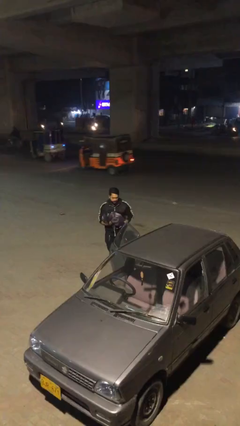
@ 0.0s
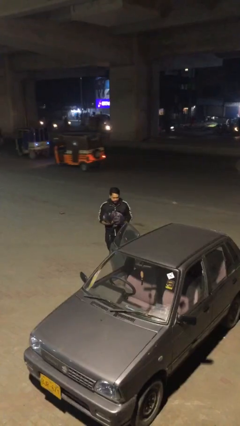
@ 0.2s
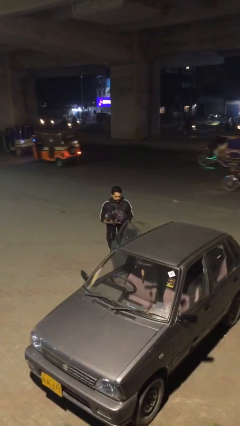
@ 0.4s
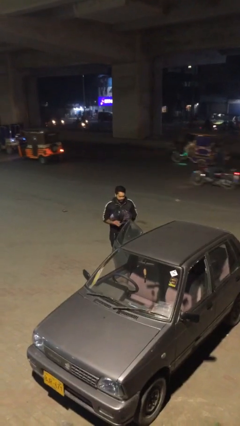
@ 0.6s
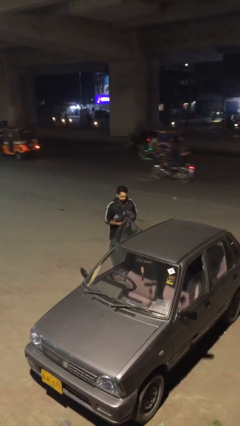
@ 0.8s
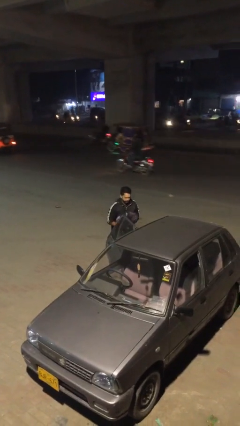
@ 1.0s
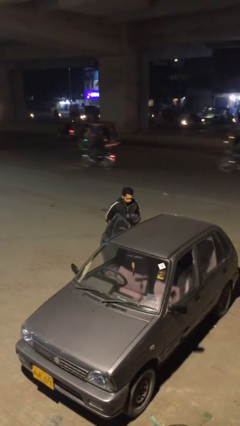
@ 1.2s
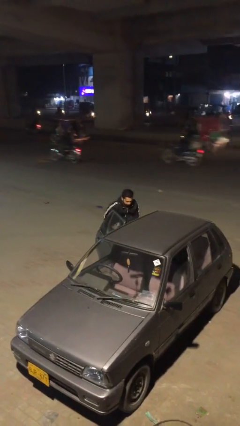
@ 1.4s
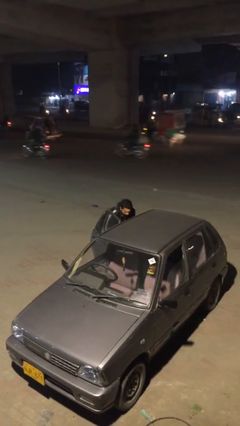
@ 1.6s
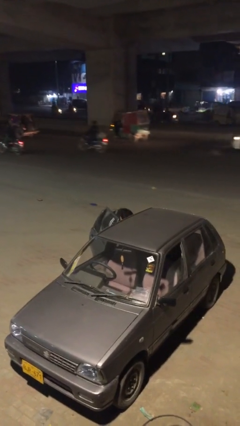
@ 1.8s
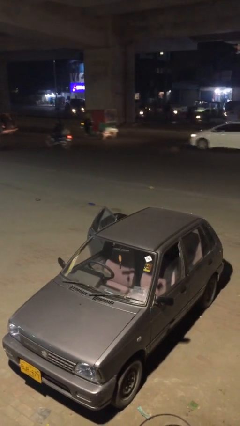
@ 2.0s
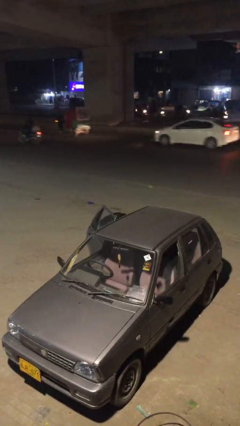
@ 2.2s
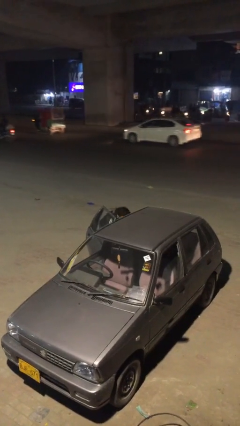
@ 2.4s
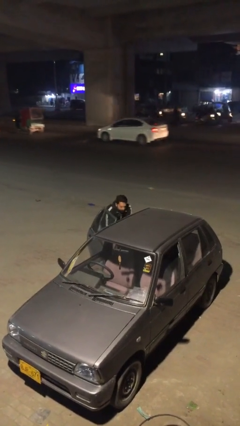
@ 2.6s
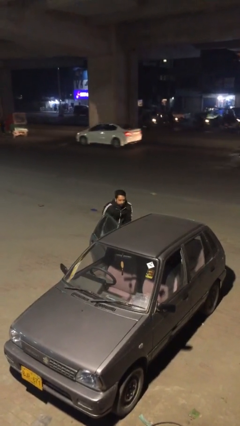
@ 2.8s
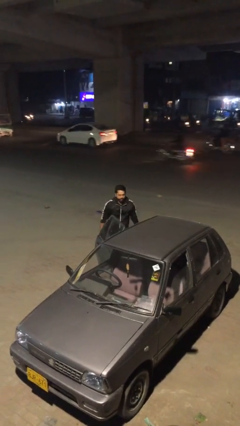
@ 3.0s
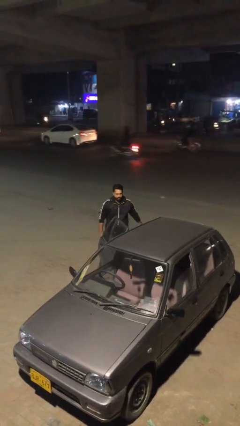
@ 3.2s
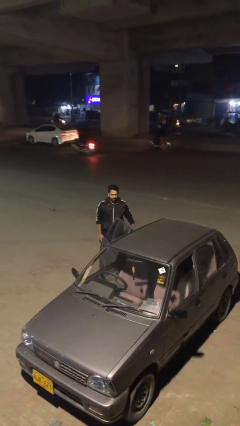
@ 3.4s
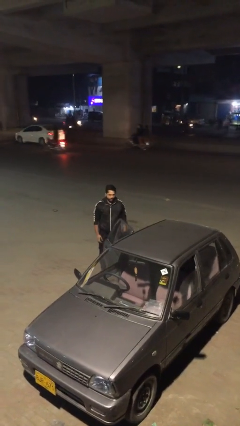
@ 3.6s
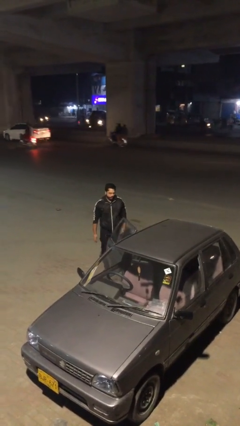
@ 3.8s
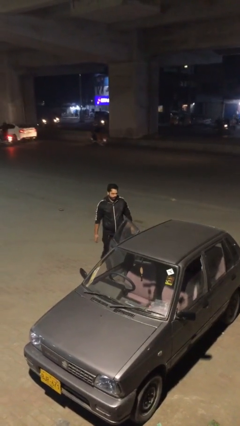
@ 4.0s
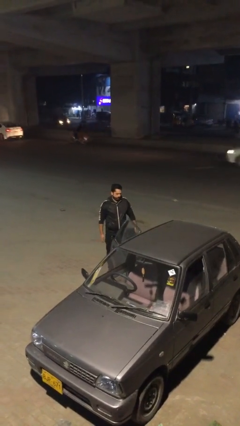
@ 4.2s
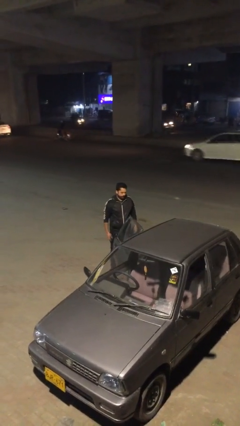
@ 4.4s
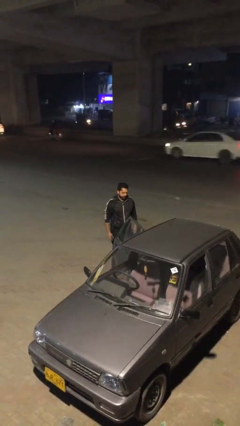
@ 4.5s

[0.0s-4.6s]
person loads car

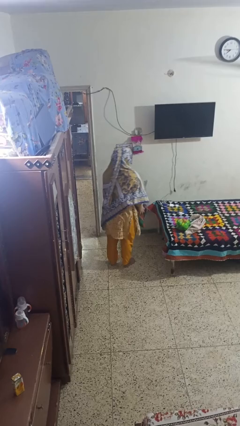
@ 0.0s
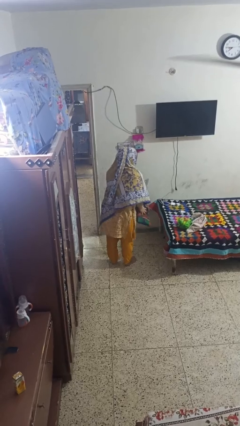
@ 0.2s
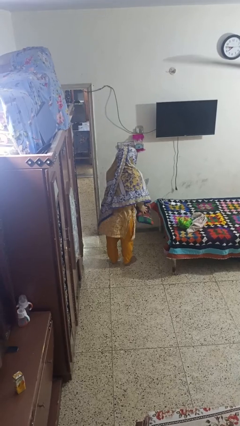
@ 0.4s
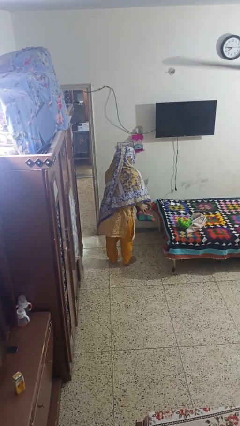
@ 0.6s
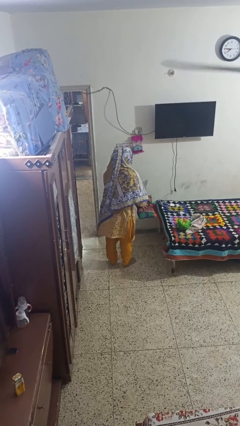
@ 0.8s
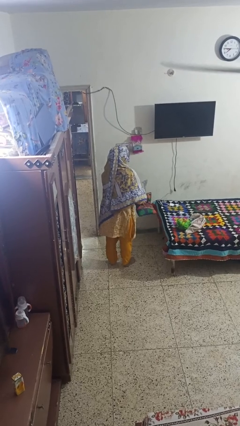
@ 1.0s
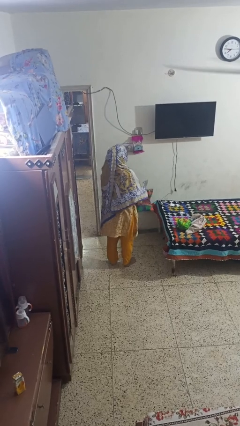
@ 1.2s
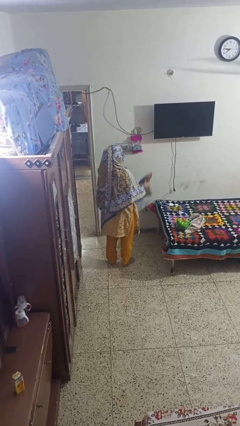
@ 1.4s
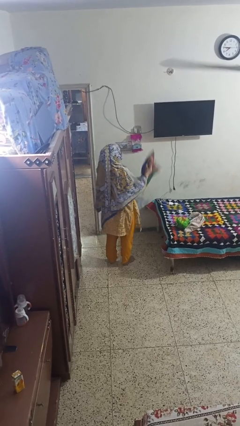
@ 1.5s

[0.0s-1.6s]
person catches dropped object

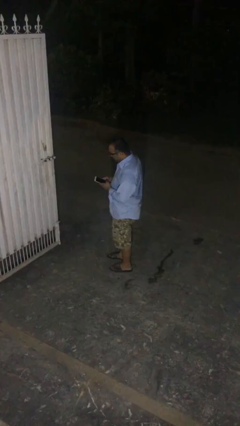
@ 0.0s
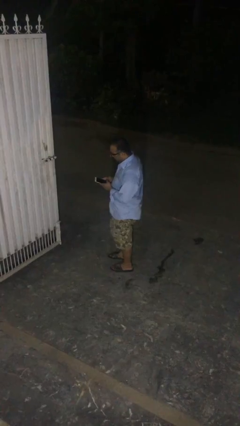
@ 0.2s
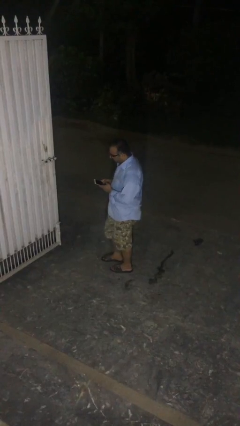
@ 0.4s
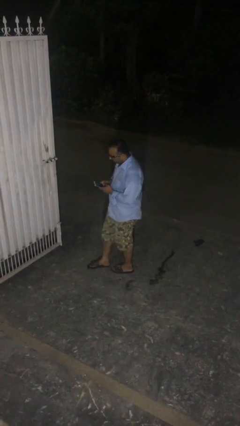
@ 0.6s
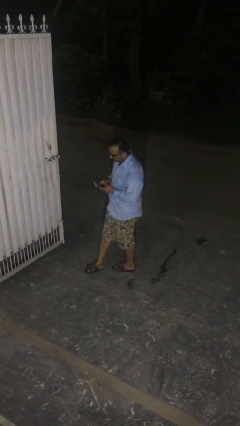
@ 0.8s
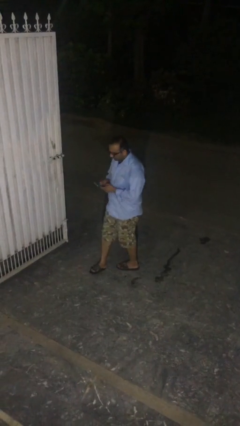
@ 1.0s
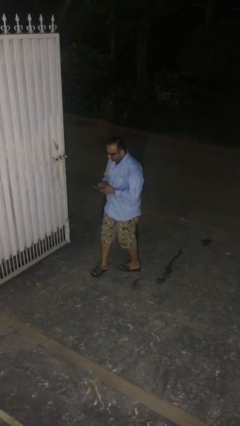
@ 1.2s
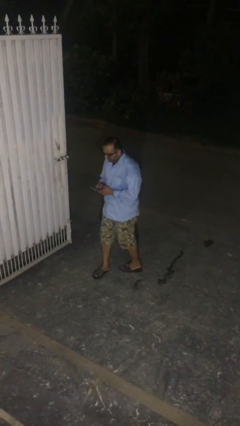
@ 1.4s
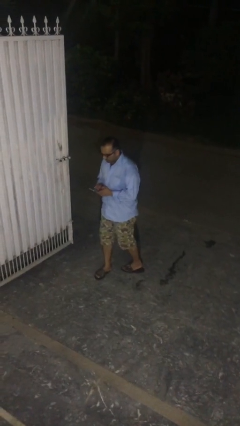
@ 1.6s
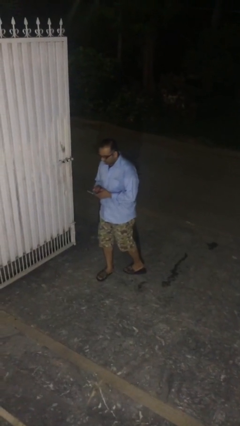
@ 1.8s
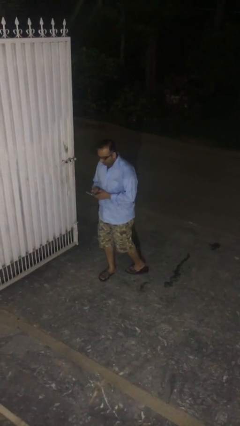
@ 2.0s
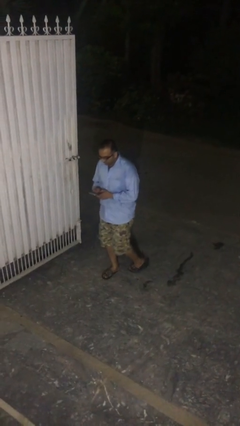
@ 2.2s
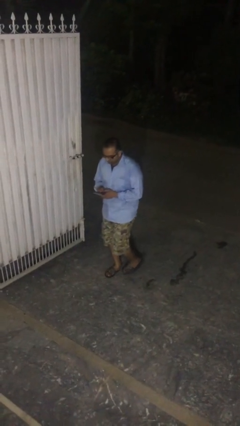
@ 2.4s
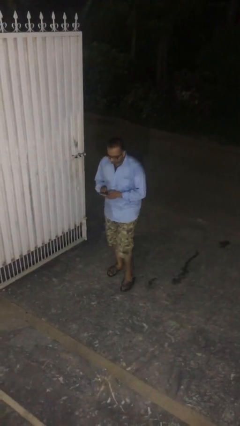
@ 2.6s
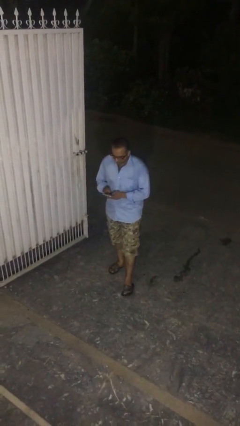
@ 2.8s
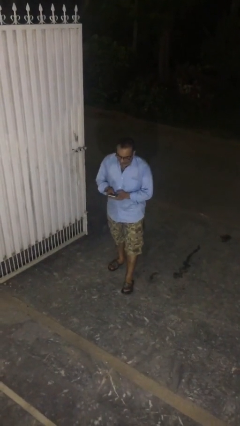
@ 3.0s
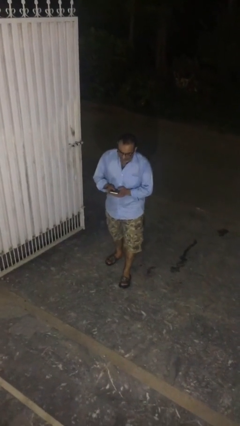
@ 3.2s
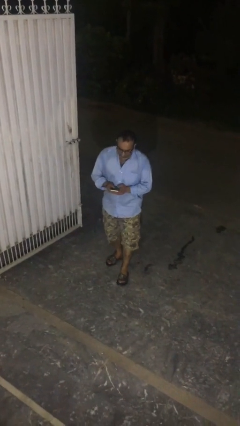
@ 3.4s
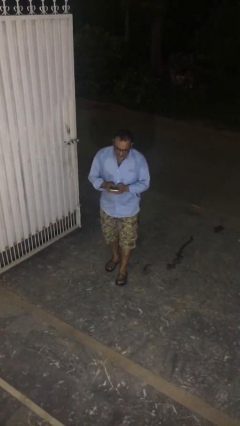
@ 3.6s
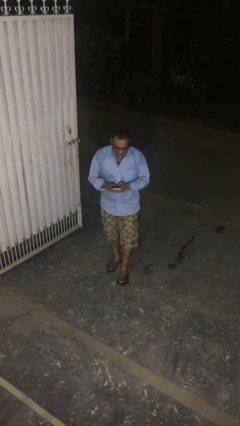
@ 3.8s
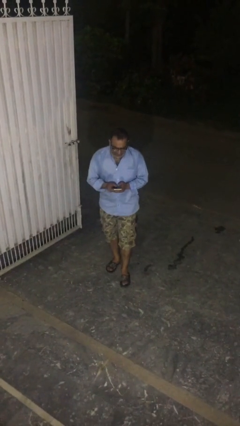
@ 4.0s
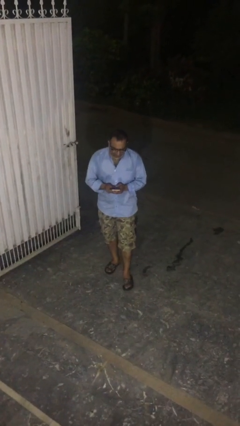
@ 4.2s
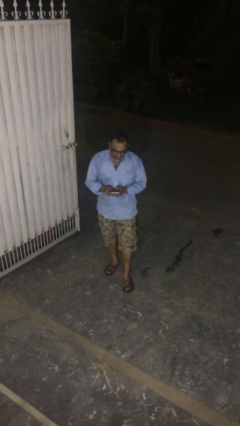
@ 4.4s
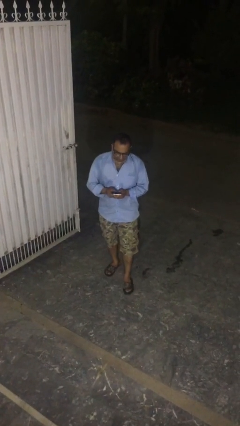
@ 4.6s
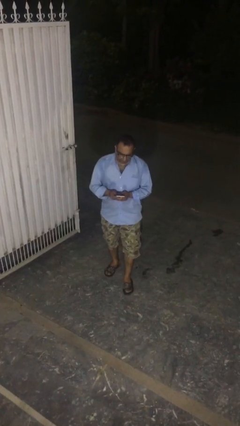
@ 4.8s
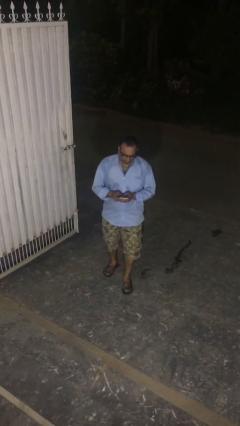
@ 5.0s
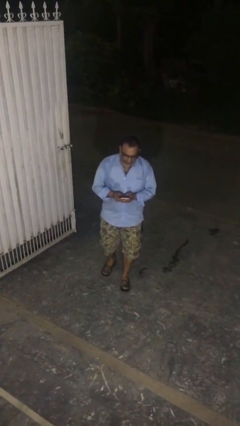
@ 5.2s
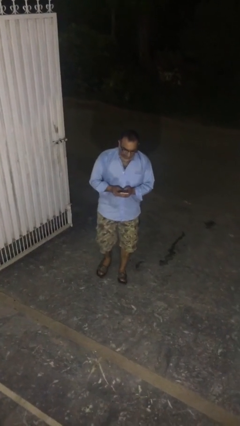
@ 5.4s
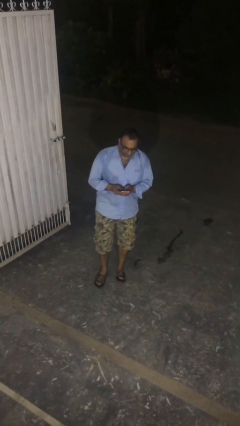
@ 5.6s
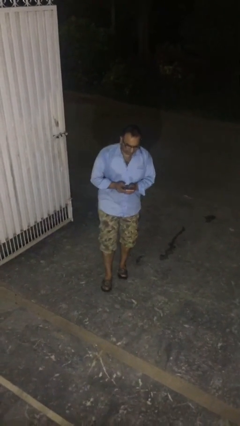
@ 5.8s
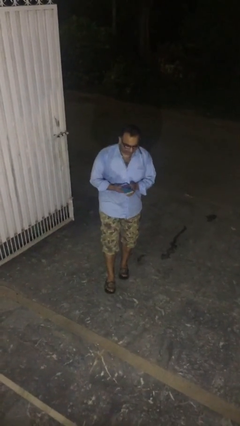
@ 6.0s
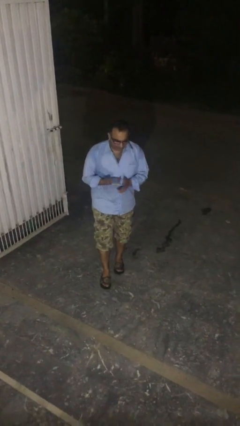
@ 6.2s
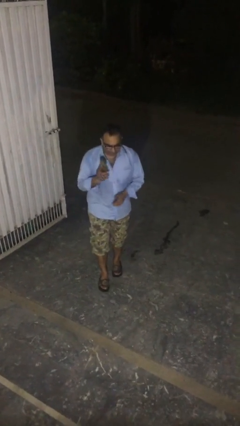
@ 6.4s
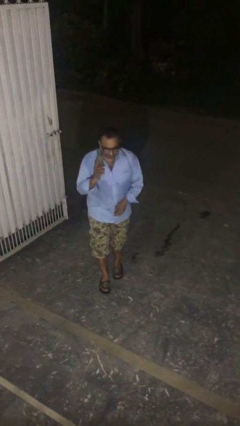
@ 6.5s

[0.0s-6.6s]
person texts on phone

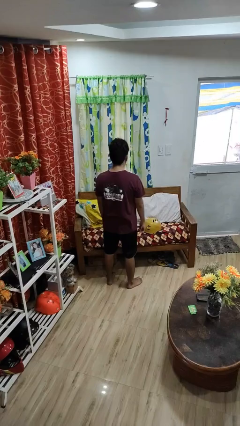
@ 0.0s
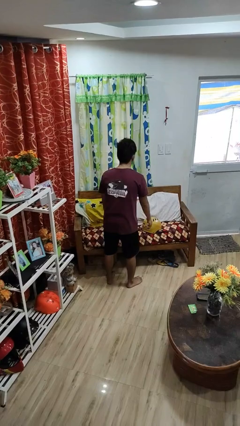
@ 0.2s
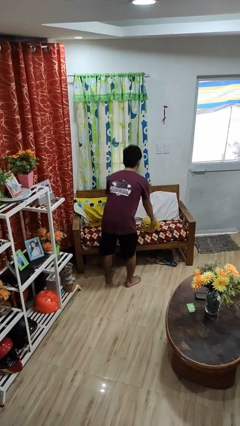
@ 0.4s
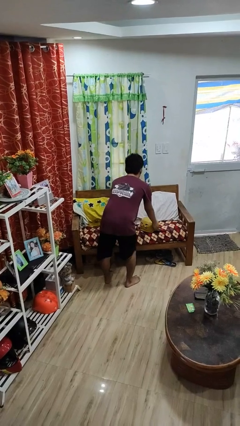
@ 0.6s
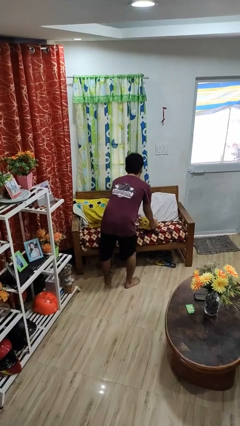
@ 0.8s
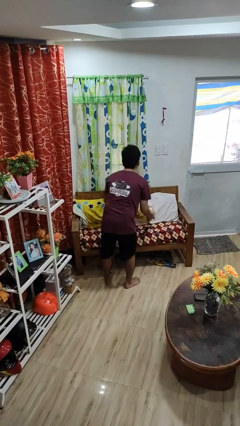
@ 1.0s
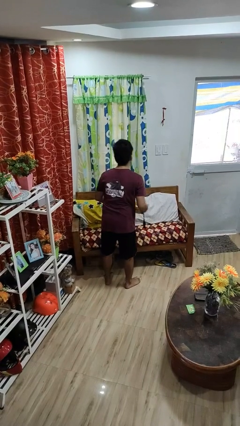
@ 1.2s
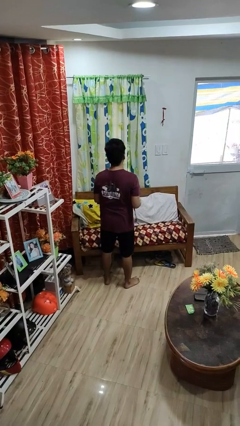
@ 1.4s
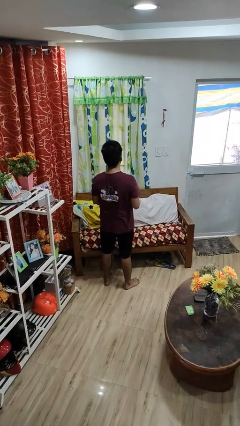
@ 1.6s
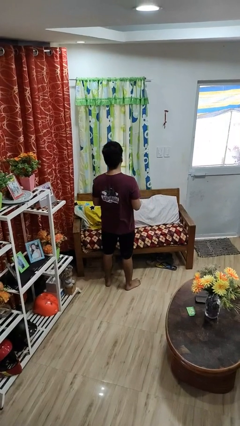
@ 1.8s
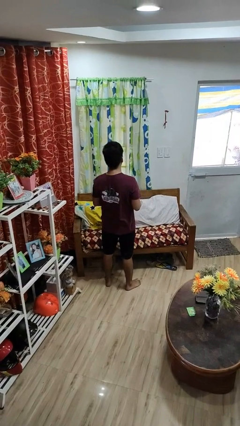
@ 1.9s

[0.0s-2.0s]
person picks up object from couch

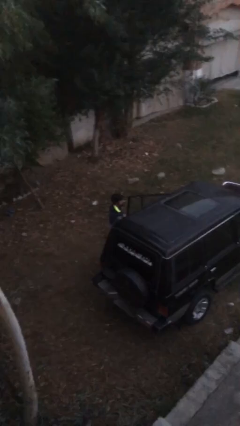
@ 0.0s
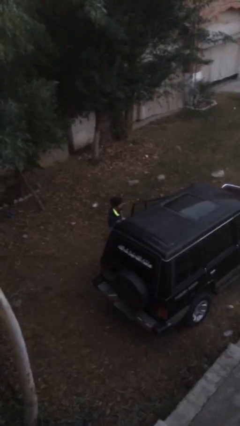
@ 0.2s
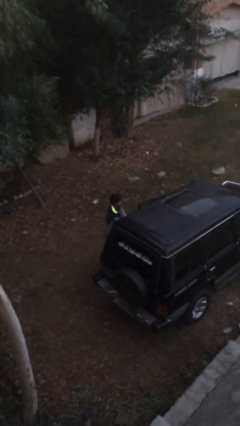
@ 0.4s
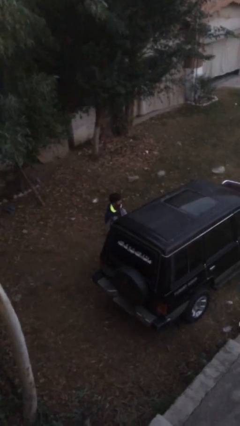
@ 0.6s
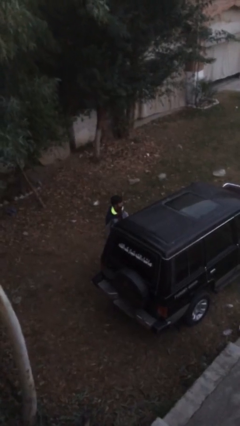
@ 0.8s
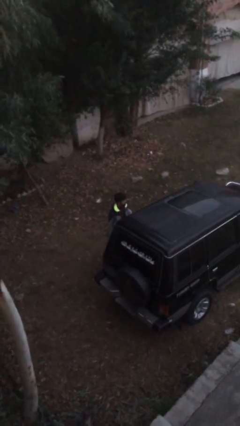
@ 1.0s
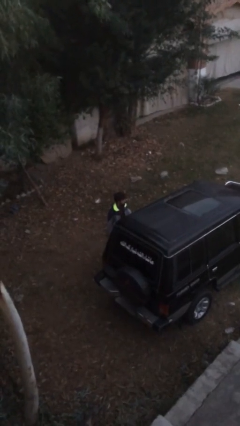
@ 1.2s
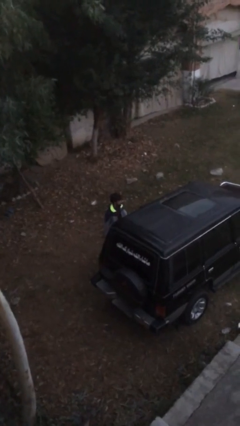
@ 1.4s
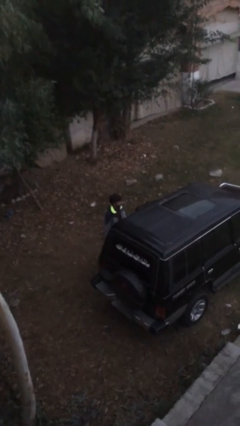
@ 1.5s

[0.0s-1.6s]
person closes car door

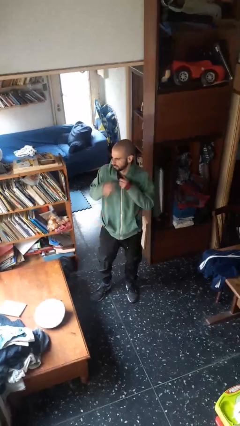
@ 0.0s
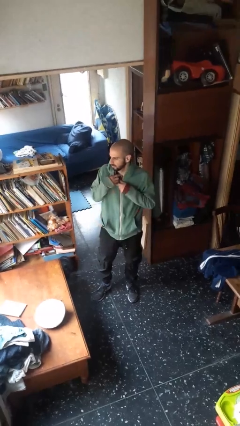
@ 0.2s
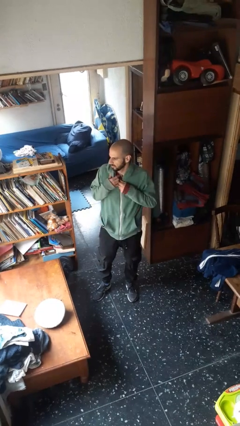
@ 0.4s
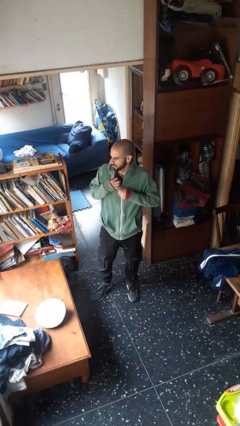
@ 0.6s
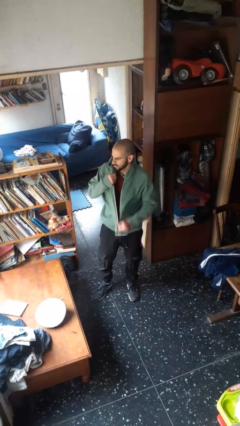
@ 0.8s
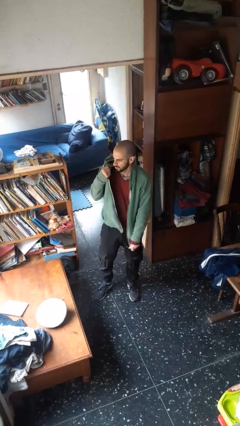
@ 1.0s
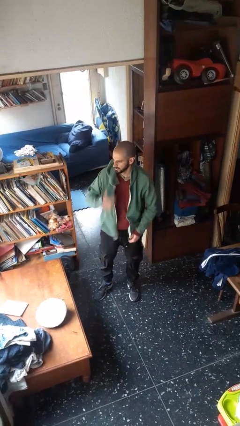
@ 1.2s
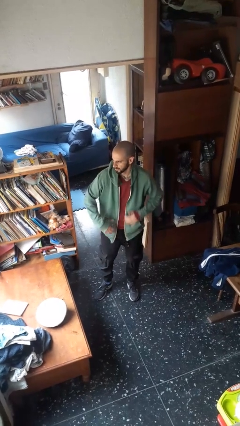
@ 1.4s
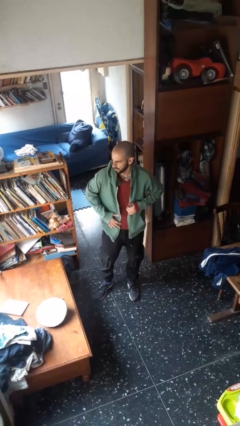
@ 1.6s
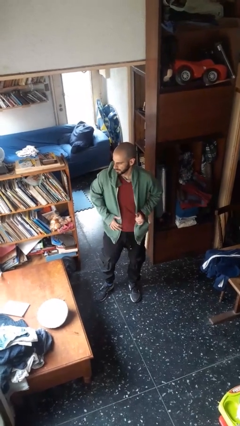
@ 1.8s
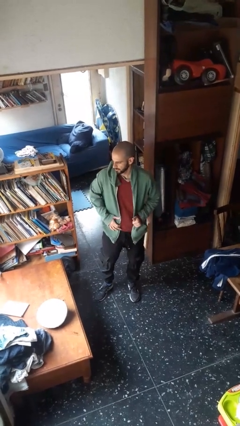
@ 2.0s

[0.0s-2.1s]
person unzips jacket
